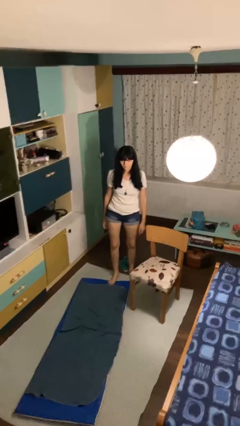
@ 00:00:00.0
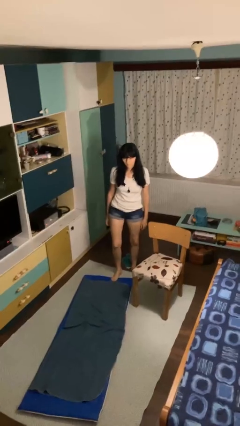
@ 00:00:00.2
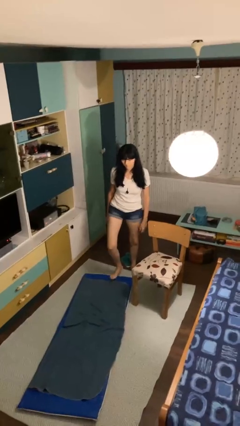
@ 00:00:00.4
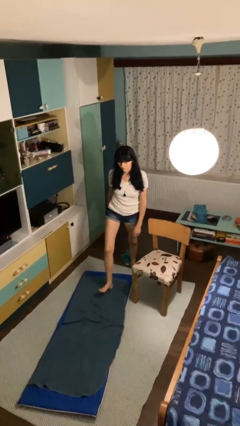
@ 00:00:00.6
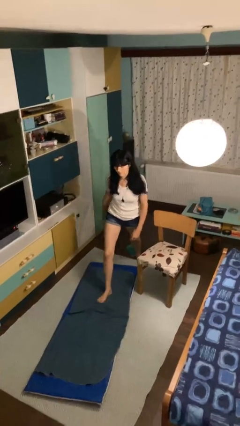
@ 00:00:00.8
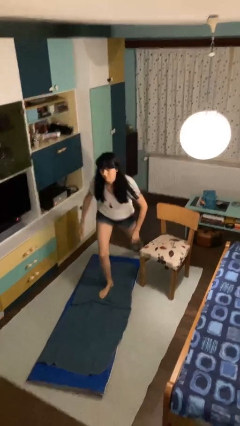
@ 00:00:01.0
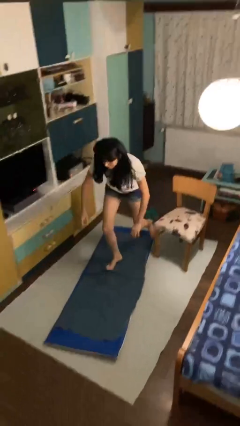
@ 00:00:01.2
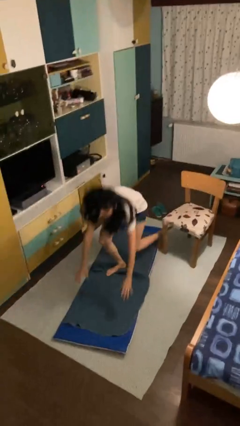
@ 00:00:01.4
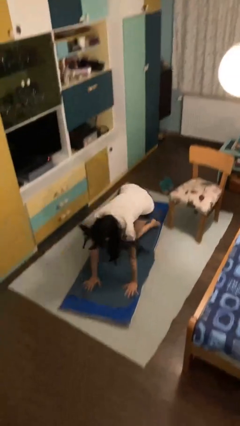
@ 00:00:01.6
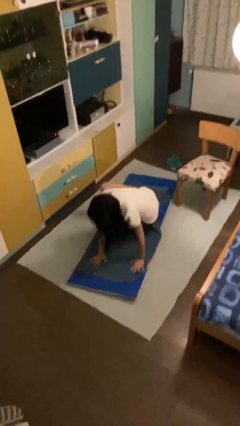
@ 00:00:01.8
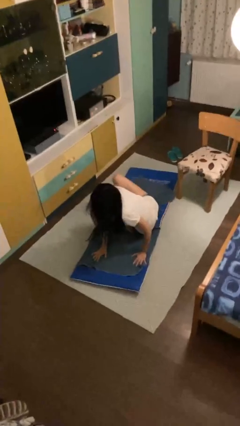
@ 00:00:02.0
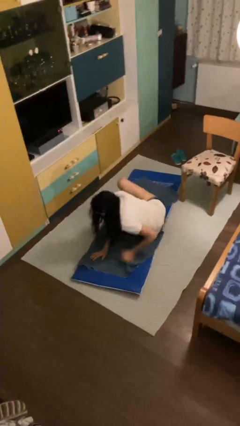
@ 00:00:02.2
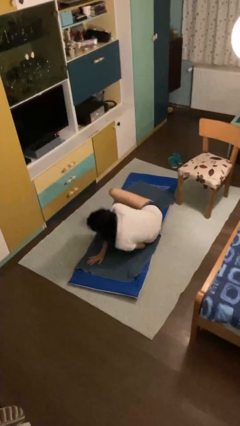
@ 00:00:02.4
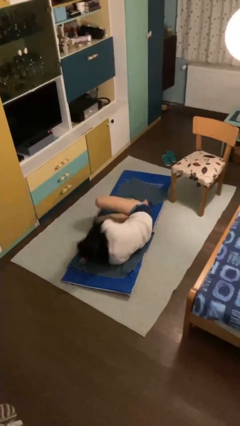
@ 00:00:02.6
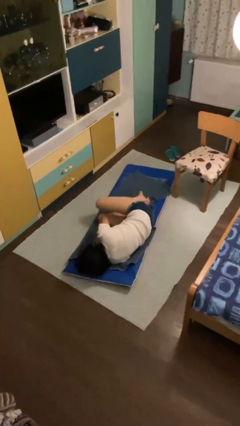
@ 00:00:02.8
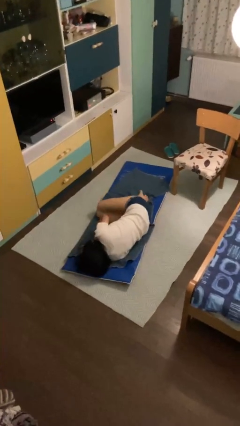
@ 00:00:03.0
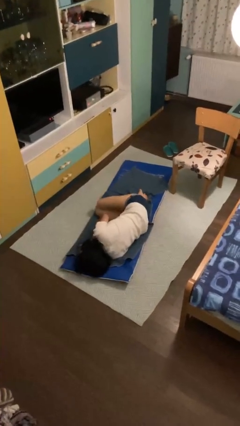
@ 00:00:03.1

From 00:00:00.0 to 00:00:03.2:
person trips on object on floor

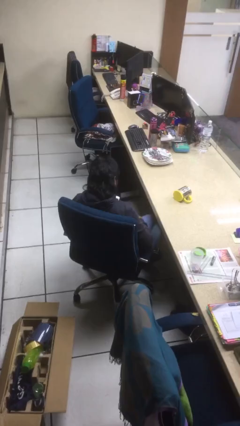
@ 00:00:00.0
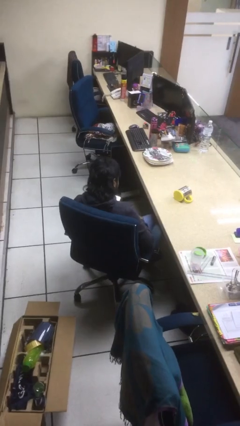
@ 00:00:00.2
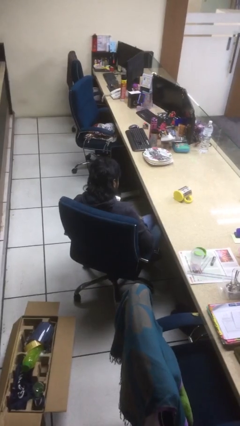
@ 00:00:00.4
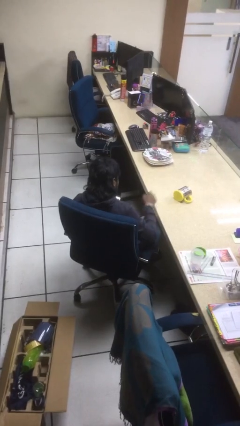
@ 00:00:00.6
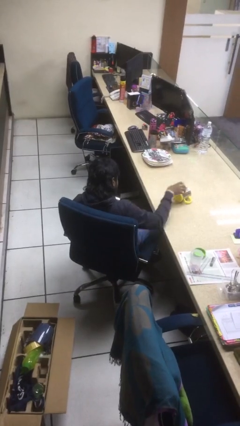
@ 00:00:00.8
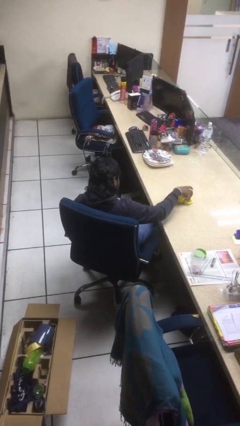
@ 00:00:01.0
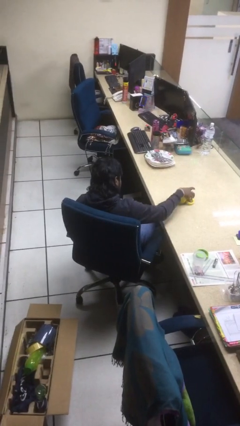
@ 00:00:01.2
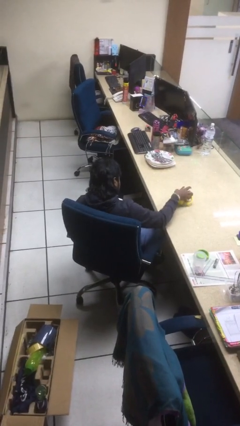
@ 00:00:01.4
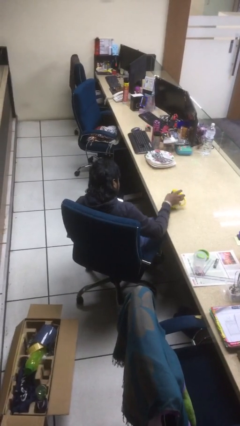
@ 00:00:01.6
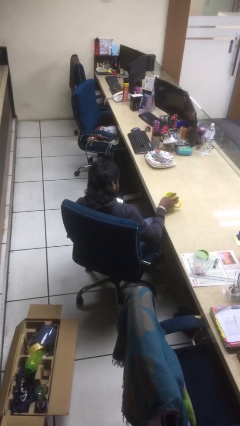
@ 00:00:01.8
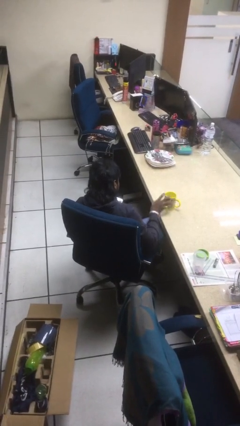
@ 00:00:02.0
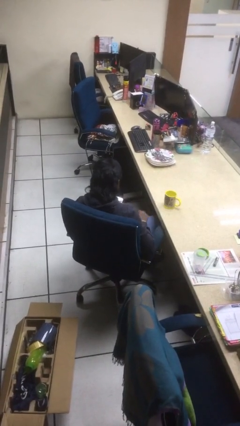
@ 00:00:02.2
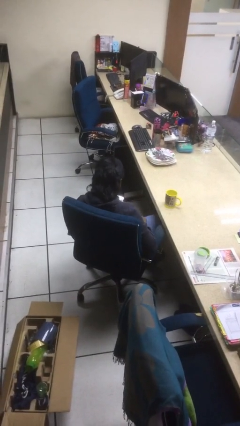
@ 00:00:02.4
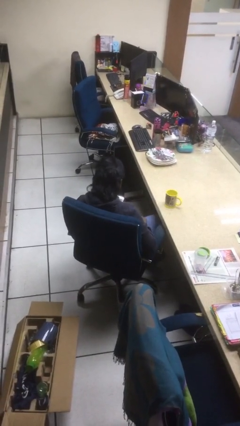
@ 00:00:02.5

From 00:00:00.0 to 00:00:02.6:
person sets upright glass

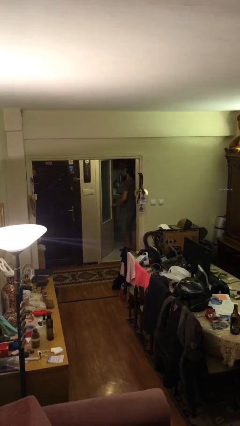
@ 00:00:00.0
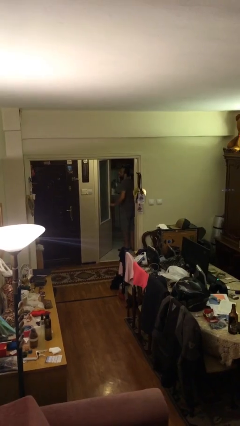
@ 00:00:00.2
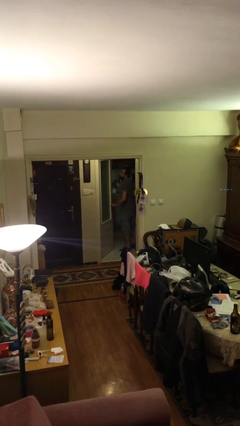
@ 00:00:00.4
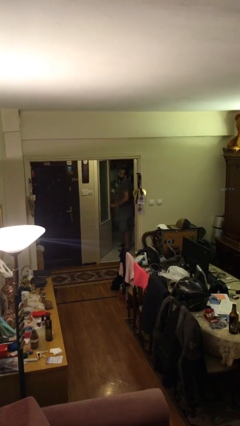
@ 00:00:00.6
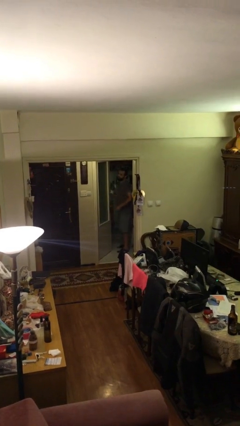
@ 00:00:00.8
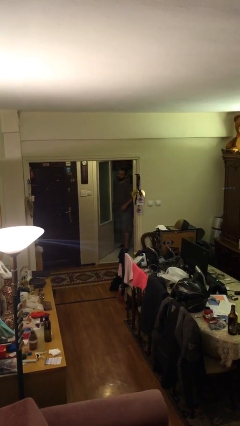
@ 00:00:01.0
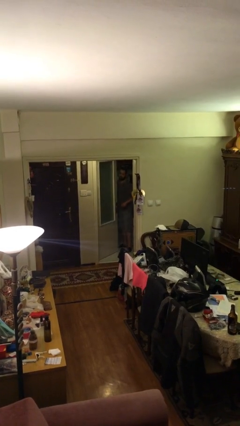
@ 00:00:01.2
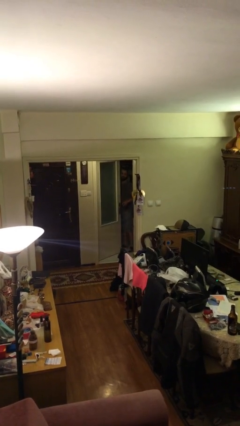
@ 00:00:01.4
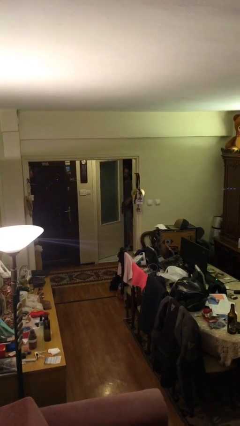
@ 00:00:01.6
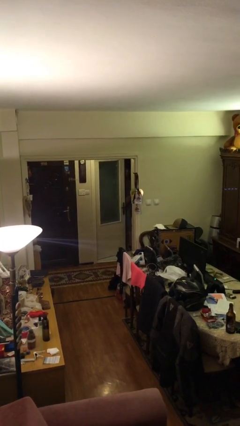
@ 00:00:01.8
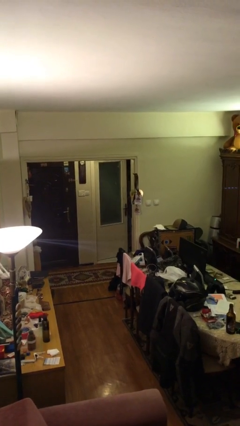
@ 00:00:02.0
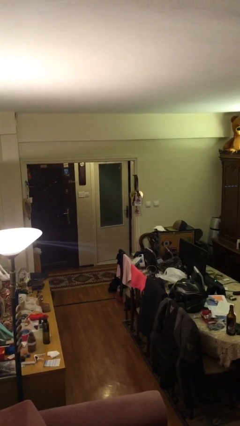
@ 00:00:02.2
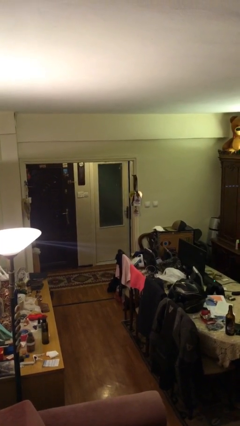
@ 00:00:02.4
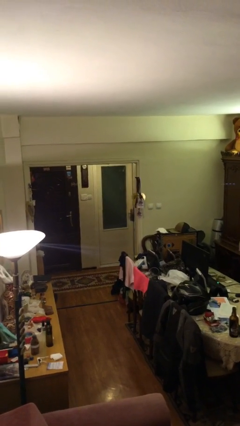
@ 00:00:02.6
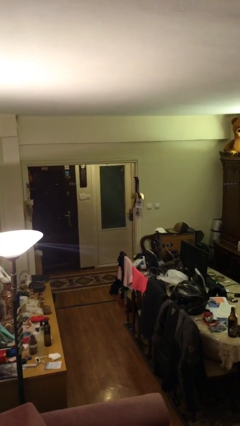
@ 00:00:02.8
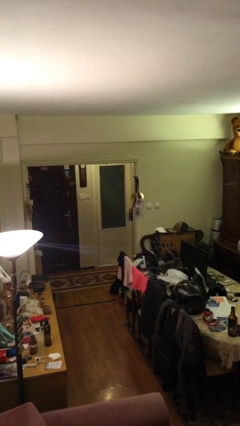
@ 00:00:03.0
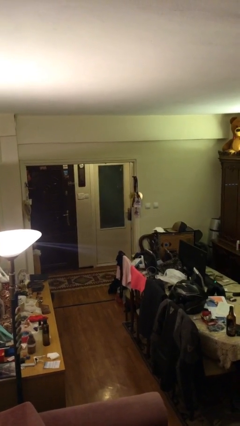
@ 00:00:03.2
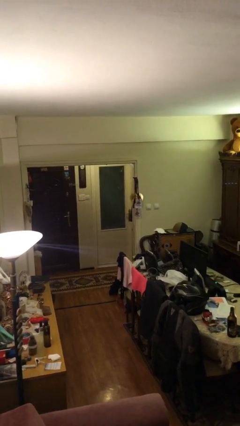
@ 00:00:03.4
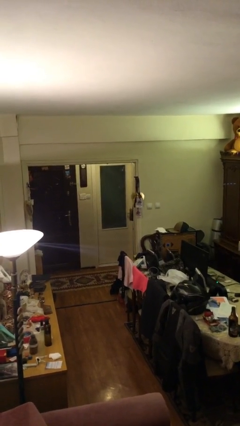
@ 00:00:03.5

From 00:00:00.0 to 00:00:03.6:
person closes facility door

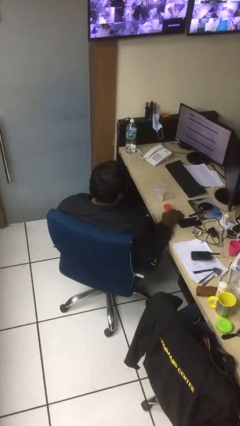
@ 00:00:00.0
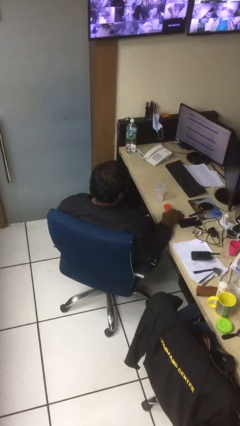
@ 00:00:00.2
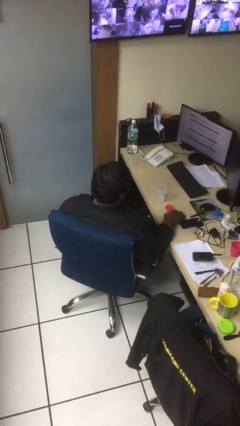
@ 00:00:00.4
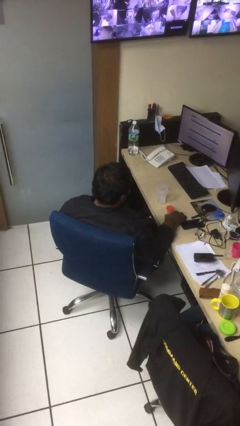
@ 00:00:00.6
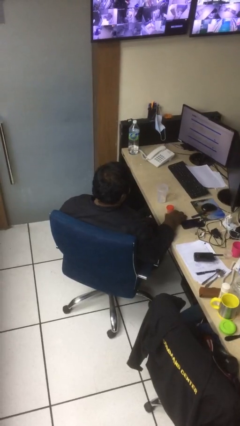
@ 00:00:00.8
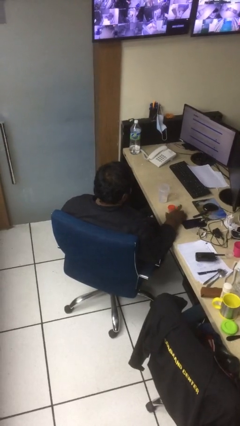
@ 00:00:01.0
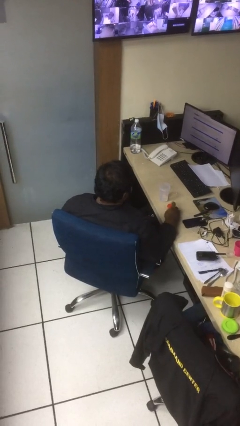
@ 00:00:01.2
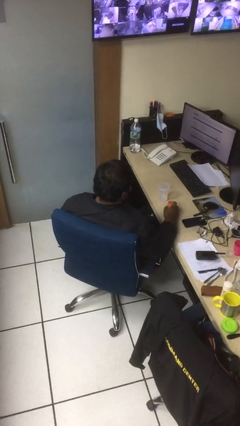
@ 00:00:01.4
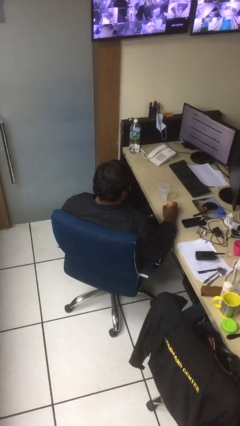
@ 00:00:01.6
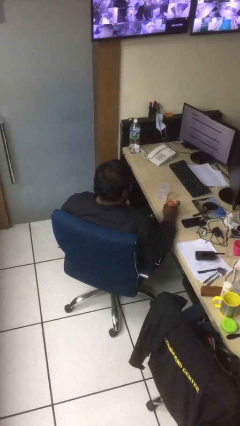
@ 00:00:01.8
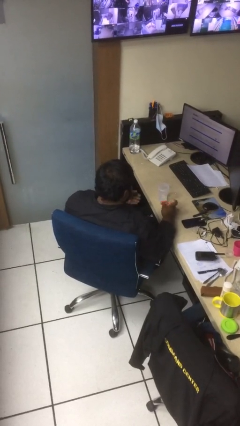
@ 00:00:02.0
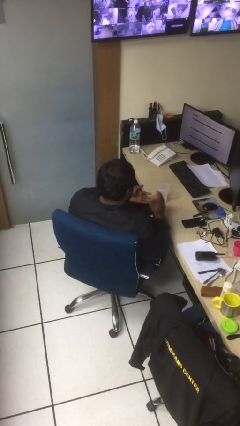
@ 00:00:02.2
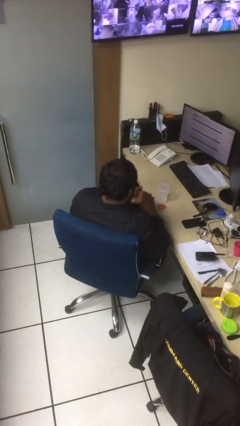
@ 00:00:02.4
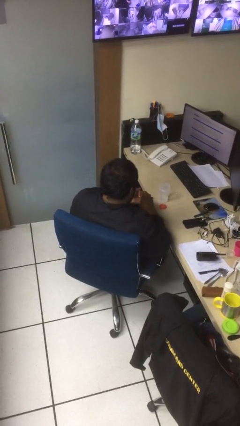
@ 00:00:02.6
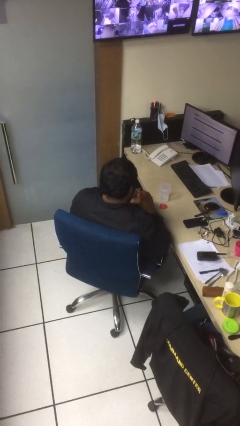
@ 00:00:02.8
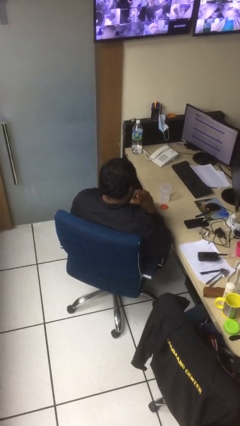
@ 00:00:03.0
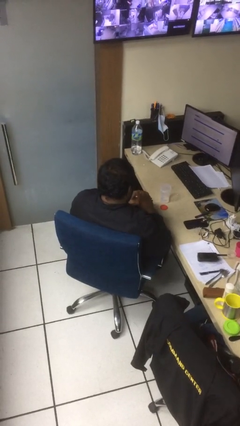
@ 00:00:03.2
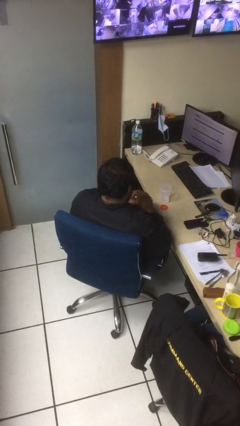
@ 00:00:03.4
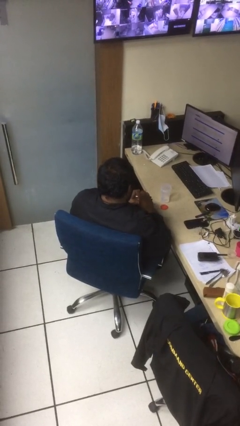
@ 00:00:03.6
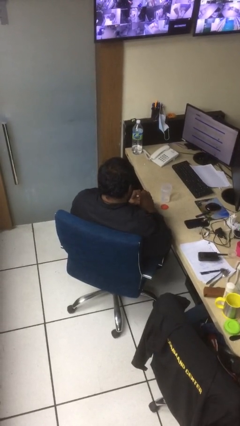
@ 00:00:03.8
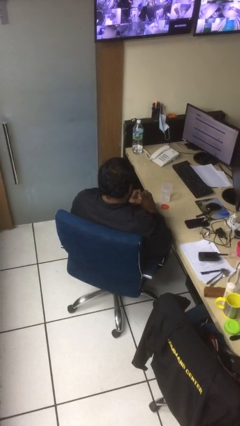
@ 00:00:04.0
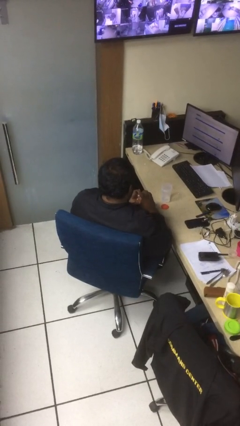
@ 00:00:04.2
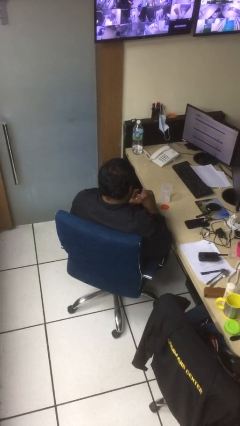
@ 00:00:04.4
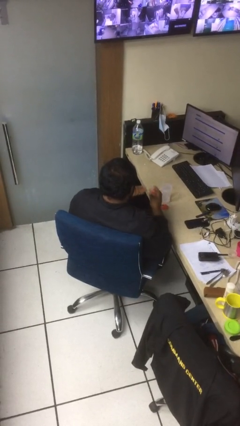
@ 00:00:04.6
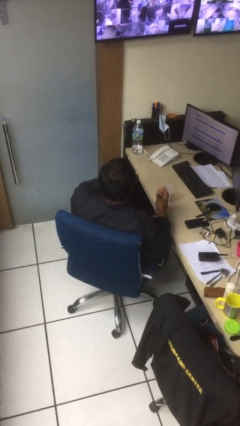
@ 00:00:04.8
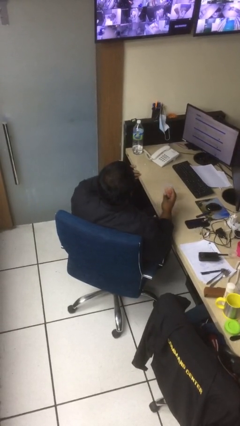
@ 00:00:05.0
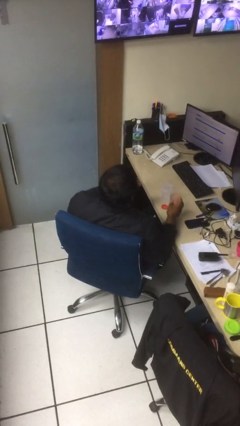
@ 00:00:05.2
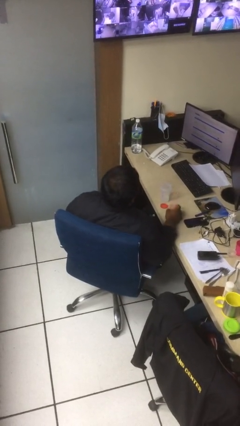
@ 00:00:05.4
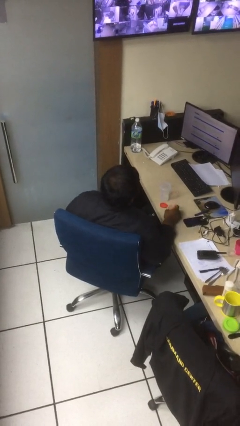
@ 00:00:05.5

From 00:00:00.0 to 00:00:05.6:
person takes medicine pills

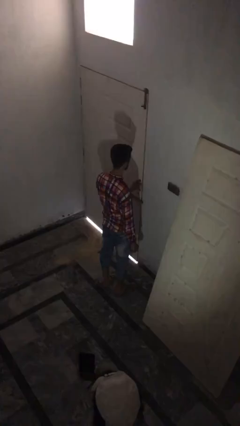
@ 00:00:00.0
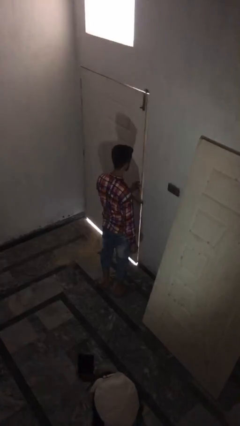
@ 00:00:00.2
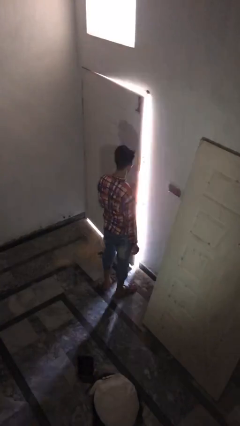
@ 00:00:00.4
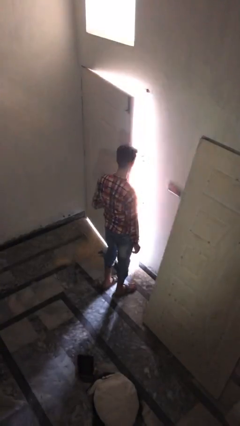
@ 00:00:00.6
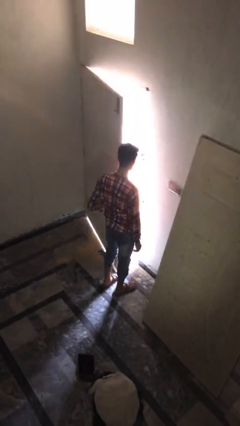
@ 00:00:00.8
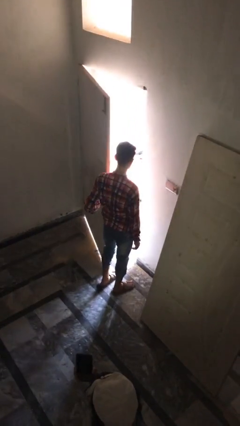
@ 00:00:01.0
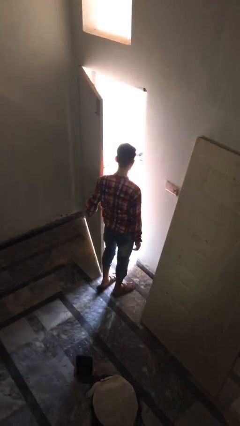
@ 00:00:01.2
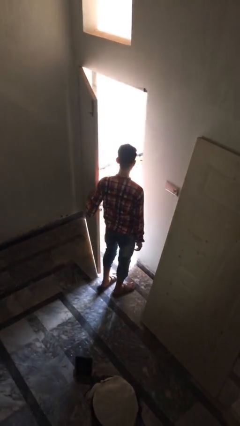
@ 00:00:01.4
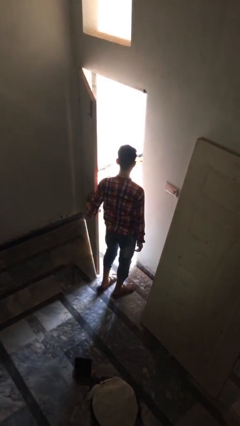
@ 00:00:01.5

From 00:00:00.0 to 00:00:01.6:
person opens facility door

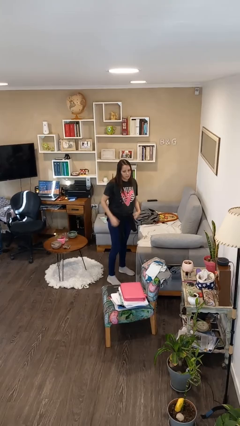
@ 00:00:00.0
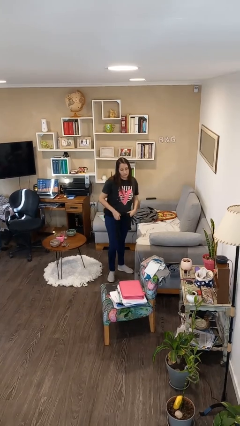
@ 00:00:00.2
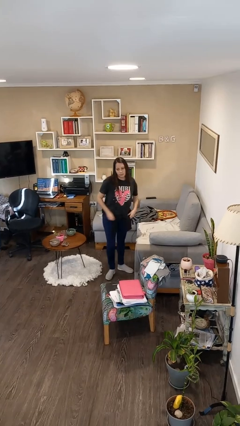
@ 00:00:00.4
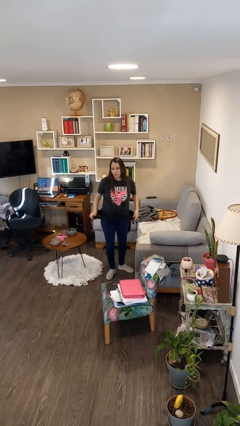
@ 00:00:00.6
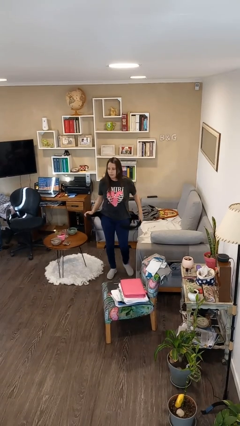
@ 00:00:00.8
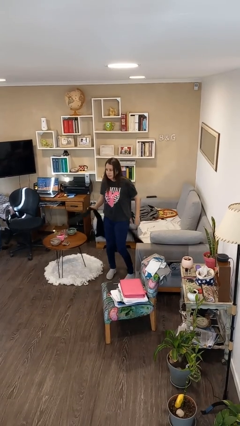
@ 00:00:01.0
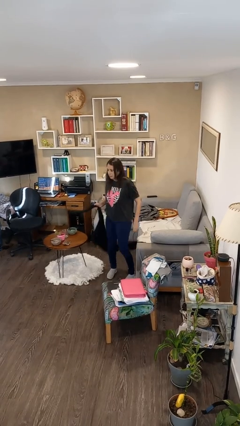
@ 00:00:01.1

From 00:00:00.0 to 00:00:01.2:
person unties jacket around waist
